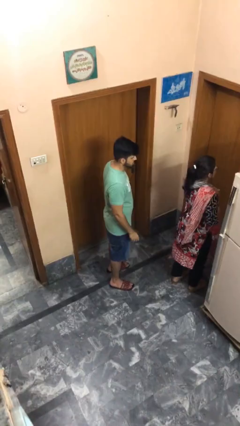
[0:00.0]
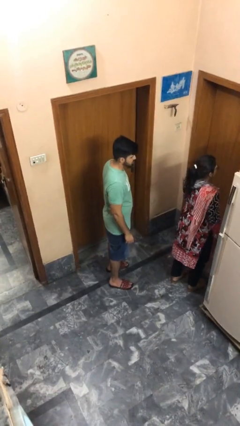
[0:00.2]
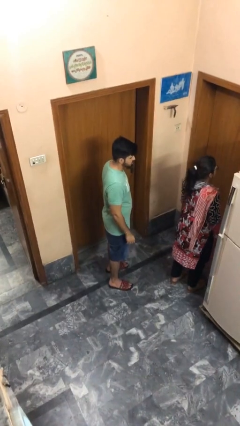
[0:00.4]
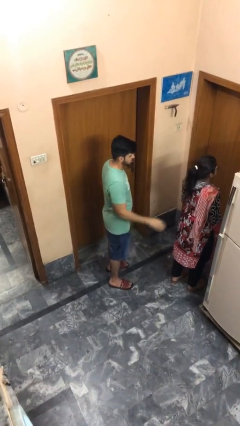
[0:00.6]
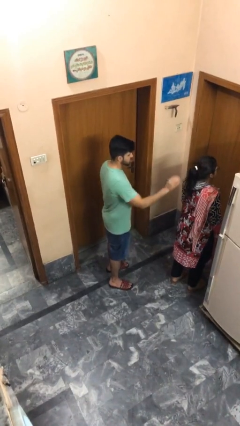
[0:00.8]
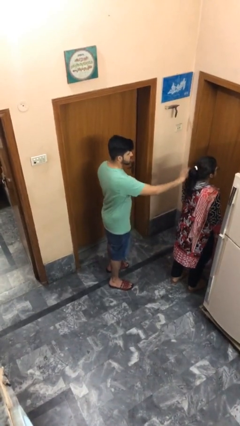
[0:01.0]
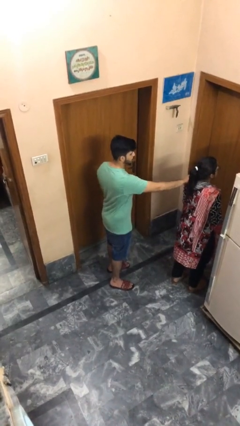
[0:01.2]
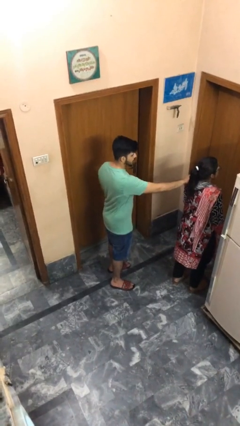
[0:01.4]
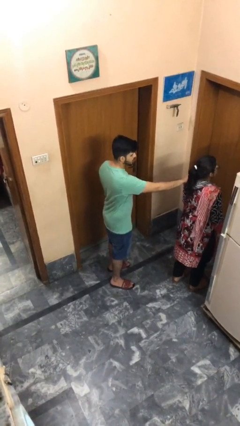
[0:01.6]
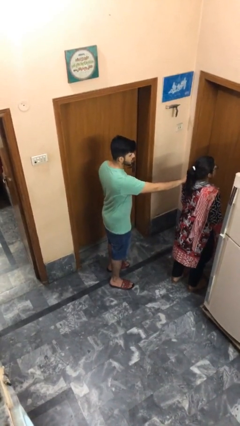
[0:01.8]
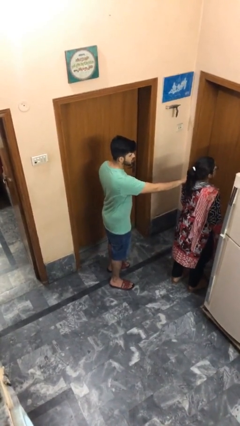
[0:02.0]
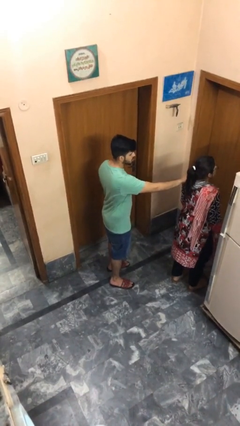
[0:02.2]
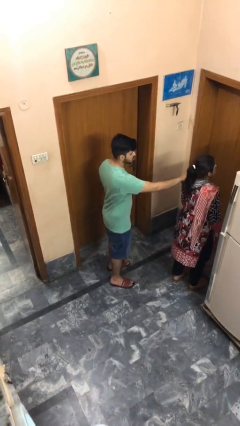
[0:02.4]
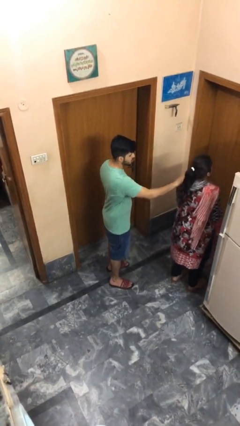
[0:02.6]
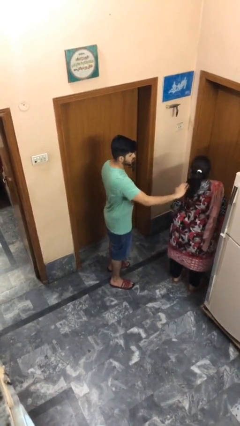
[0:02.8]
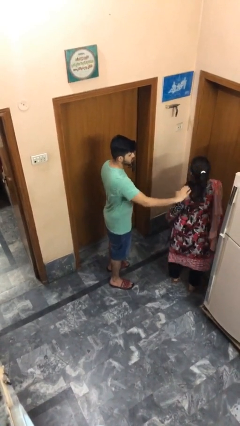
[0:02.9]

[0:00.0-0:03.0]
person grabs person by shoulder

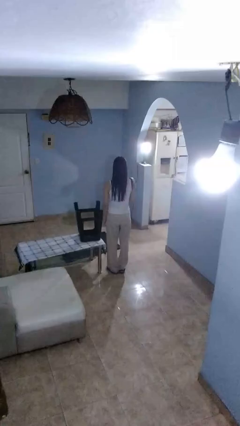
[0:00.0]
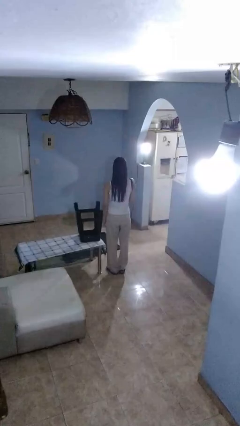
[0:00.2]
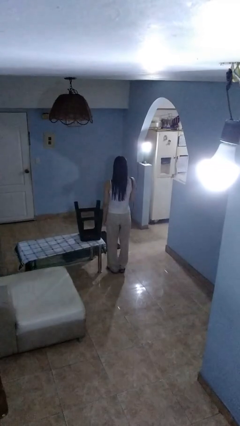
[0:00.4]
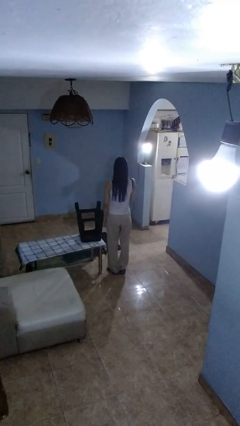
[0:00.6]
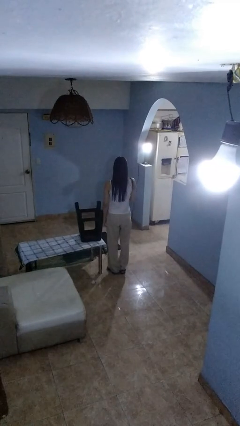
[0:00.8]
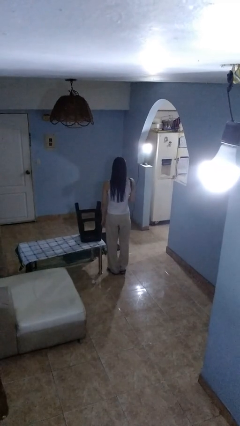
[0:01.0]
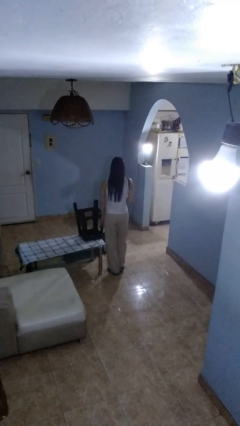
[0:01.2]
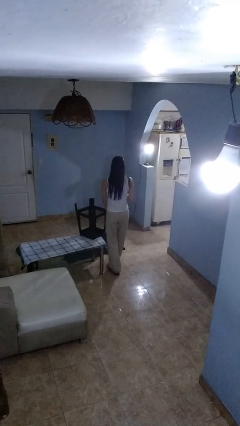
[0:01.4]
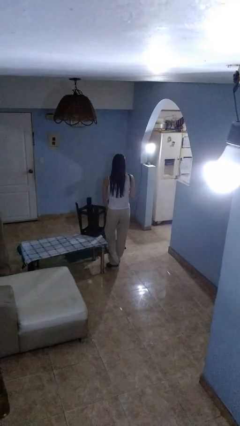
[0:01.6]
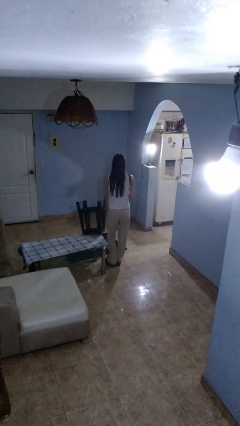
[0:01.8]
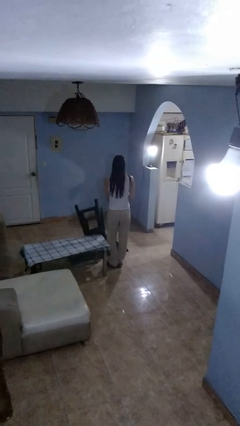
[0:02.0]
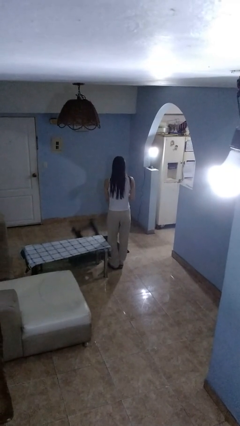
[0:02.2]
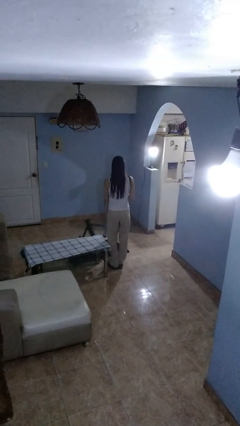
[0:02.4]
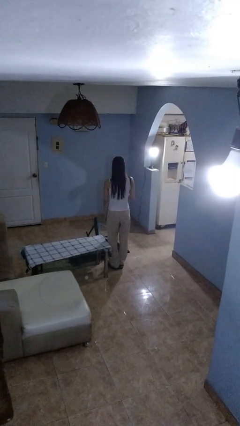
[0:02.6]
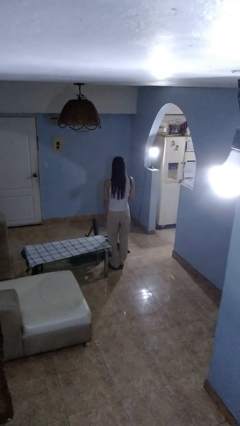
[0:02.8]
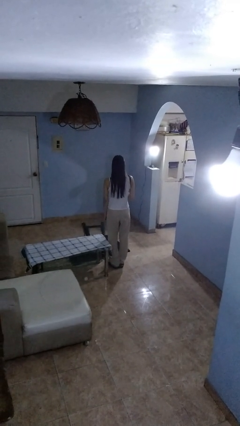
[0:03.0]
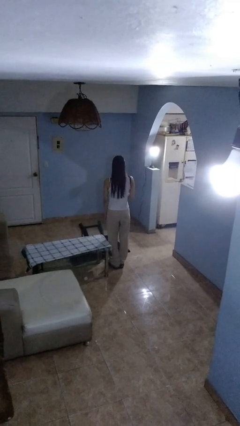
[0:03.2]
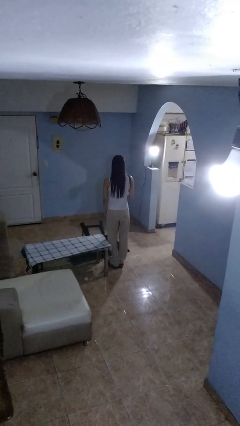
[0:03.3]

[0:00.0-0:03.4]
person knocks over furniture

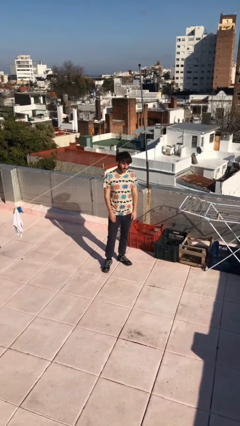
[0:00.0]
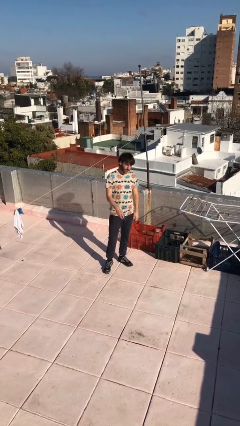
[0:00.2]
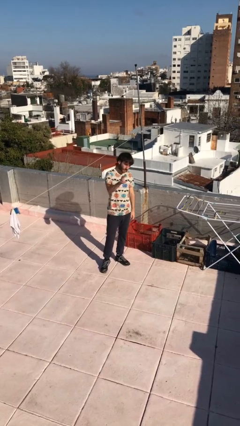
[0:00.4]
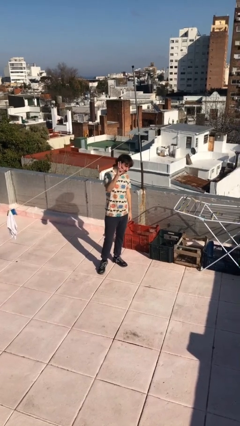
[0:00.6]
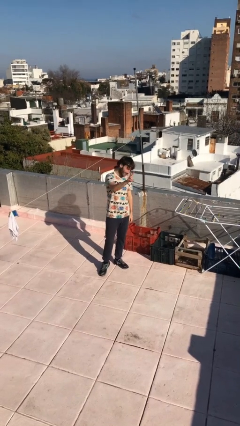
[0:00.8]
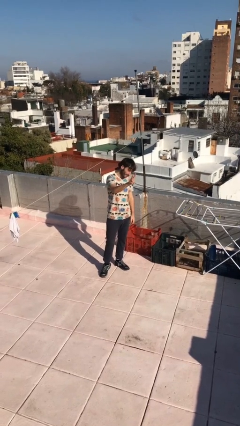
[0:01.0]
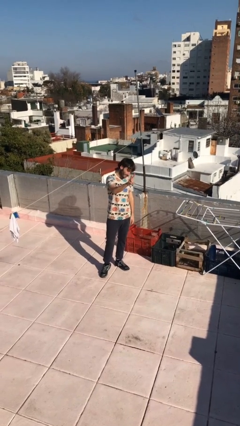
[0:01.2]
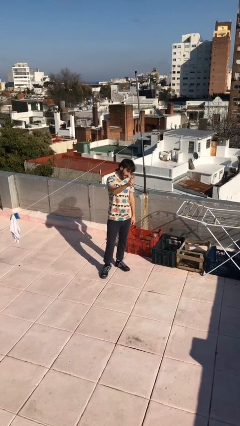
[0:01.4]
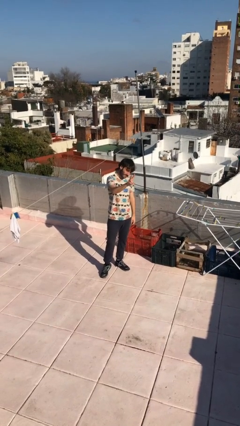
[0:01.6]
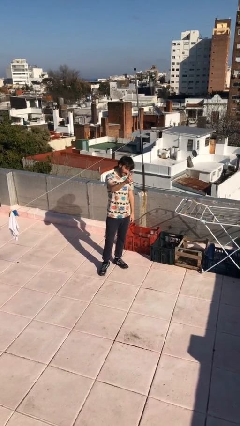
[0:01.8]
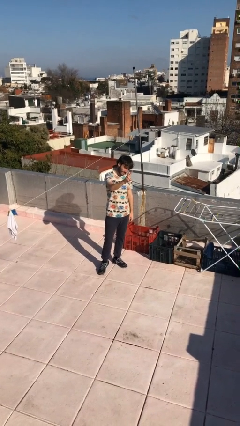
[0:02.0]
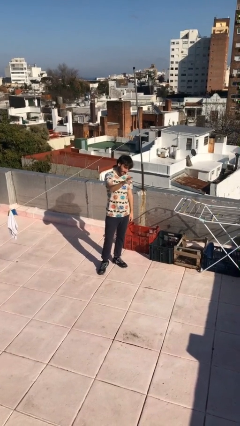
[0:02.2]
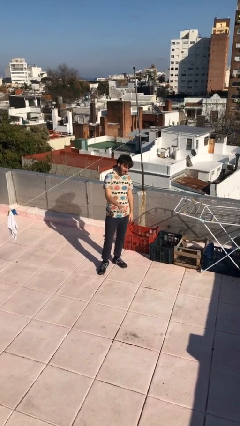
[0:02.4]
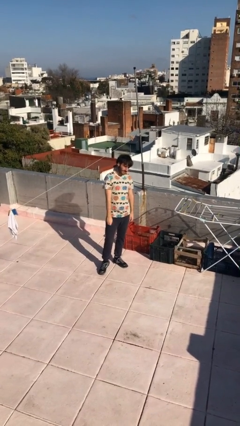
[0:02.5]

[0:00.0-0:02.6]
person gestures peace

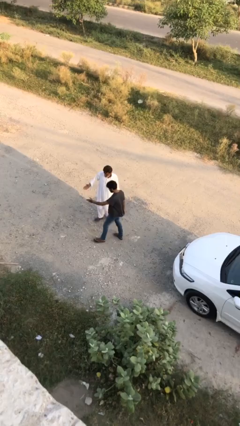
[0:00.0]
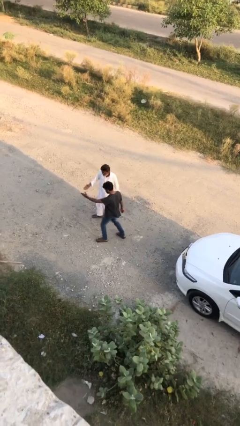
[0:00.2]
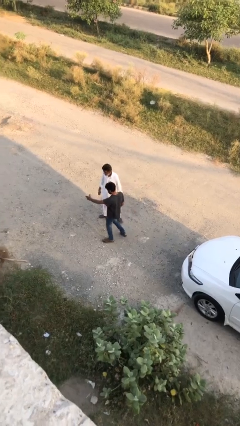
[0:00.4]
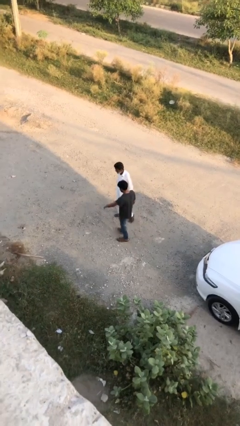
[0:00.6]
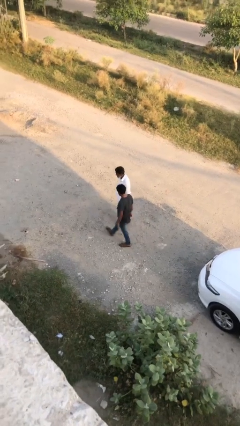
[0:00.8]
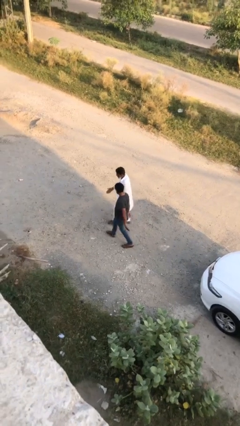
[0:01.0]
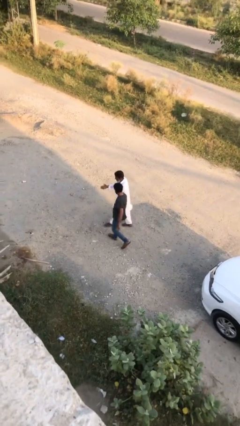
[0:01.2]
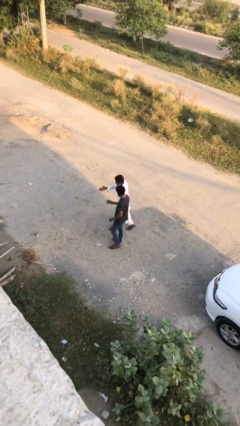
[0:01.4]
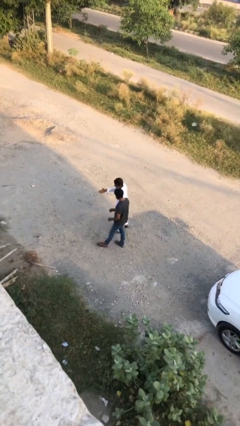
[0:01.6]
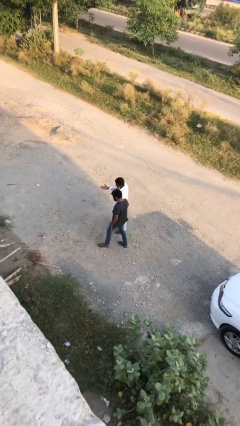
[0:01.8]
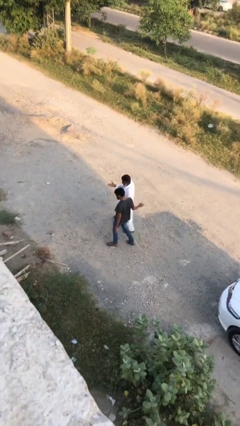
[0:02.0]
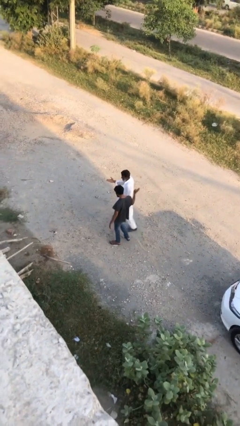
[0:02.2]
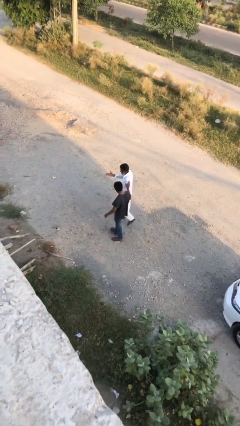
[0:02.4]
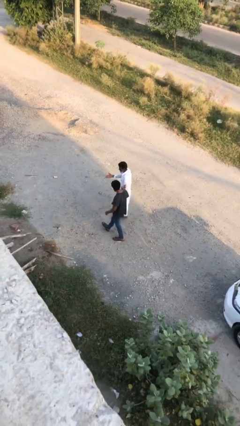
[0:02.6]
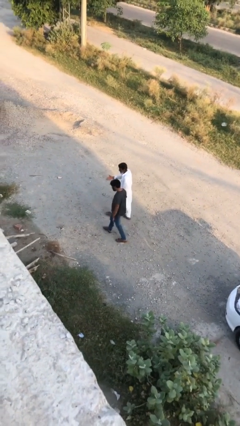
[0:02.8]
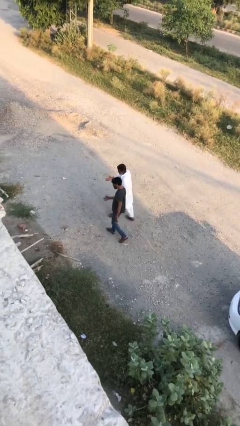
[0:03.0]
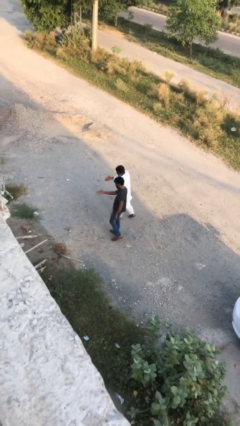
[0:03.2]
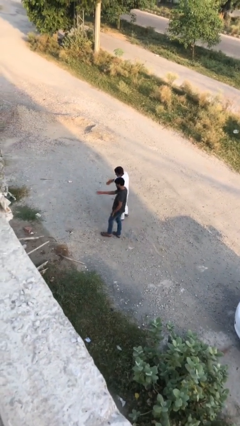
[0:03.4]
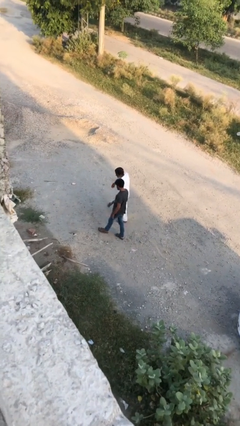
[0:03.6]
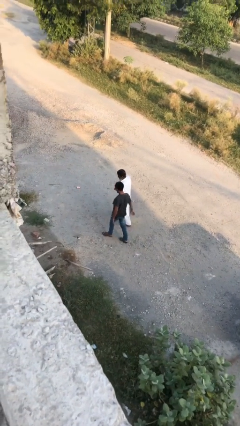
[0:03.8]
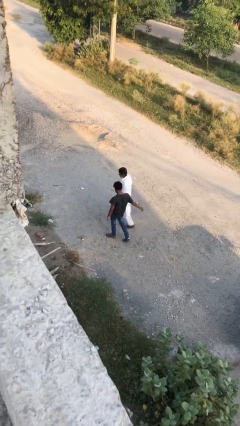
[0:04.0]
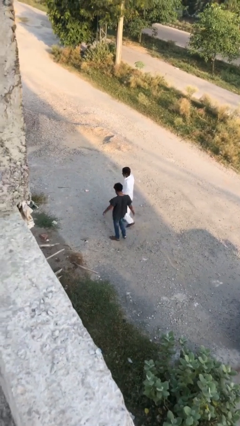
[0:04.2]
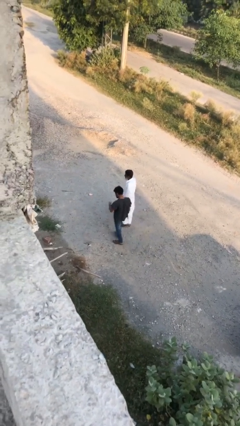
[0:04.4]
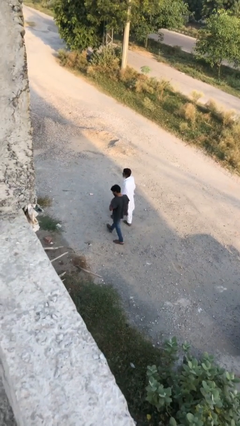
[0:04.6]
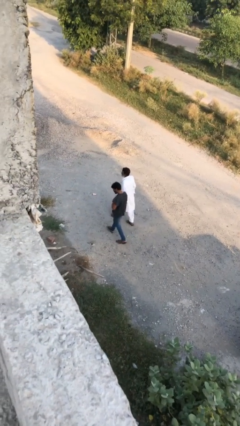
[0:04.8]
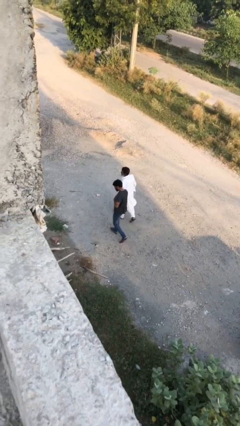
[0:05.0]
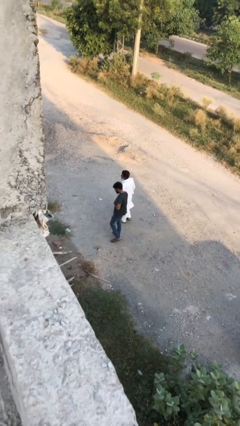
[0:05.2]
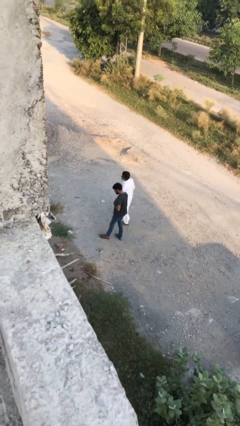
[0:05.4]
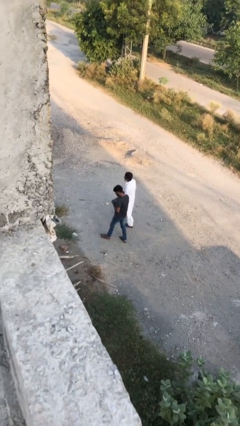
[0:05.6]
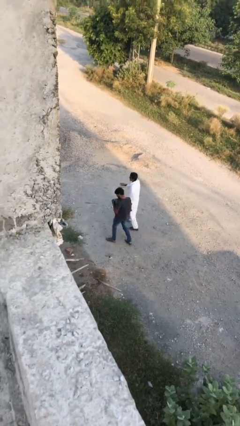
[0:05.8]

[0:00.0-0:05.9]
person talks to person

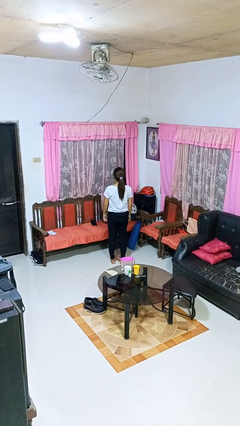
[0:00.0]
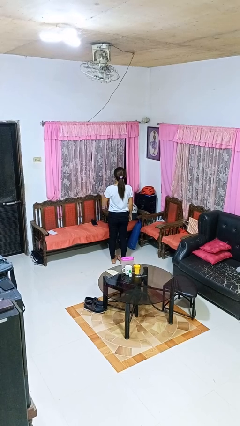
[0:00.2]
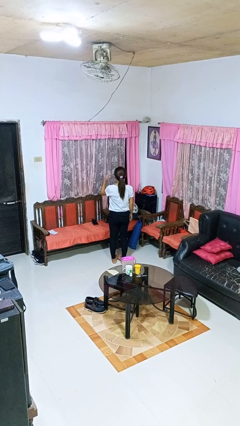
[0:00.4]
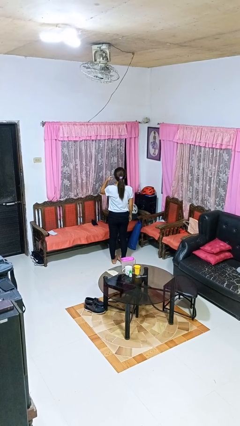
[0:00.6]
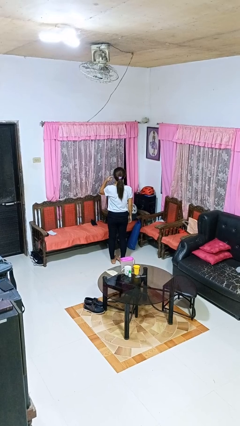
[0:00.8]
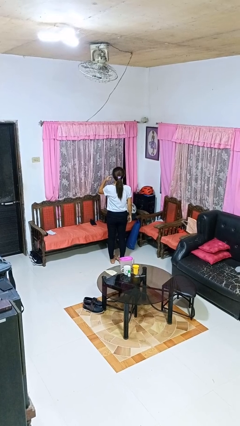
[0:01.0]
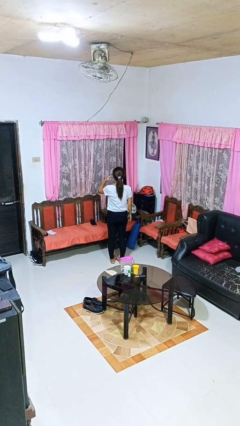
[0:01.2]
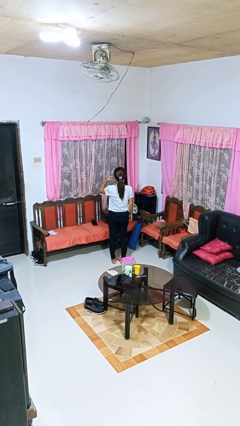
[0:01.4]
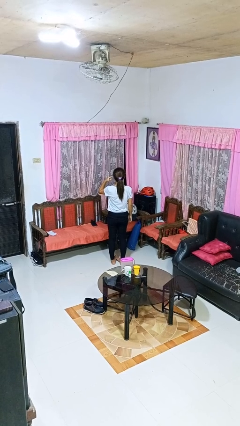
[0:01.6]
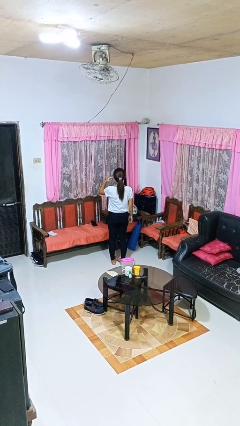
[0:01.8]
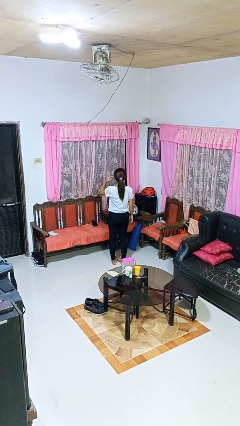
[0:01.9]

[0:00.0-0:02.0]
person gestures listen closely

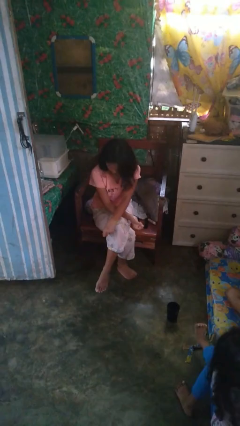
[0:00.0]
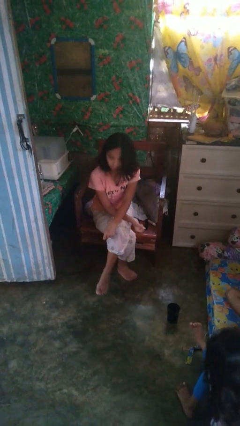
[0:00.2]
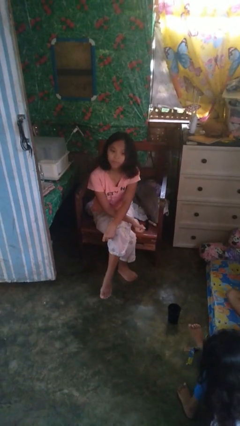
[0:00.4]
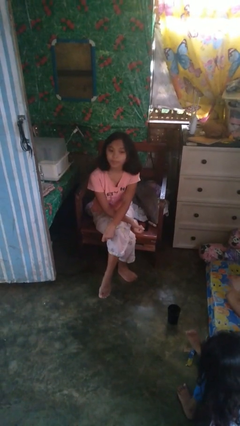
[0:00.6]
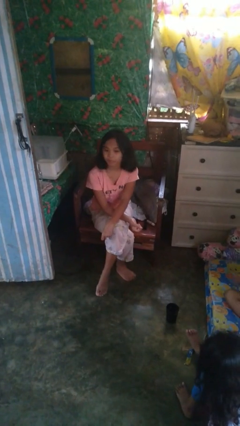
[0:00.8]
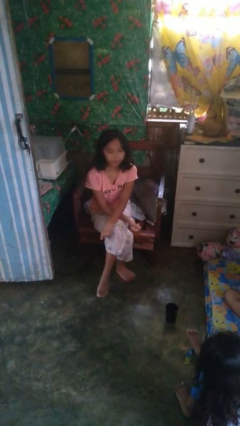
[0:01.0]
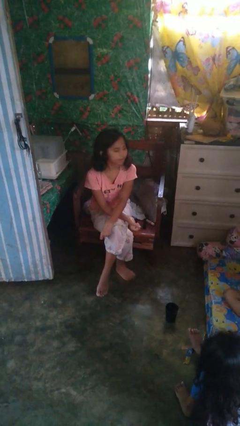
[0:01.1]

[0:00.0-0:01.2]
person nods head
